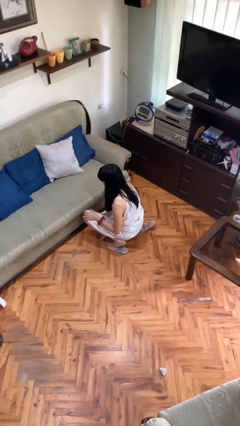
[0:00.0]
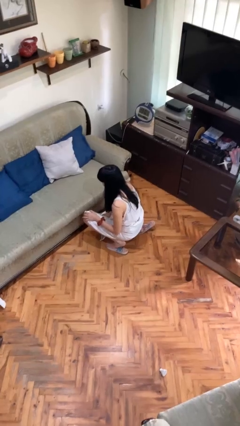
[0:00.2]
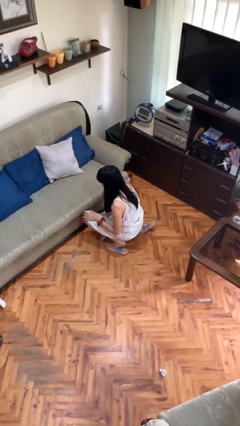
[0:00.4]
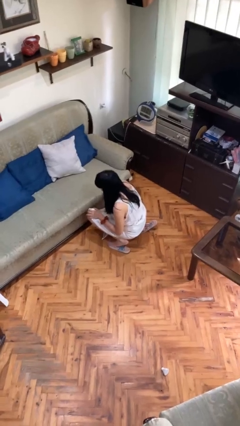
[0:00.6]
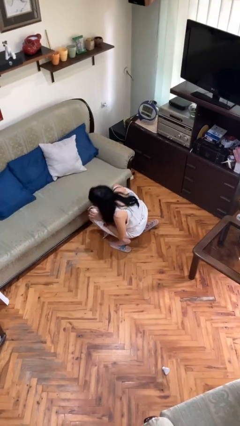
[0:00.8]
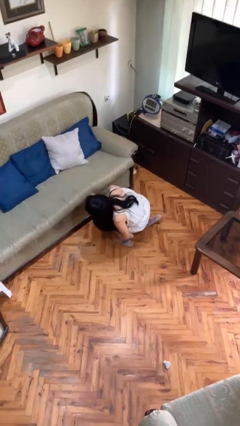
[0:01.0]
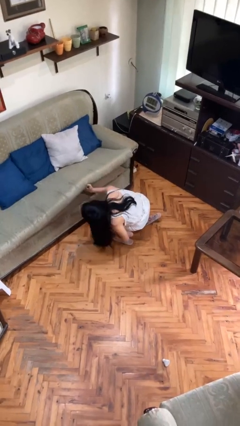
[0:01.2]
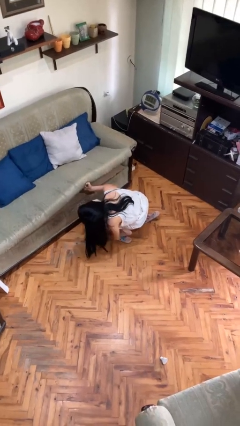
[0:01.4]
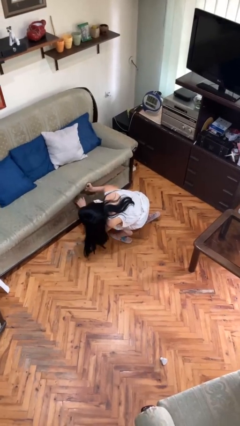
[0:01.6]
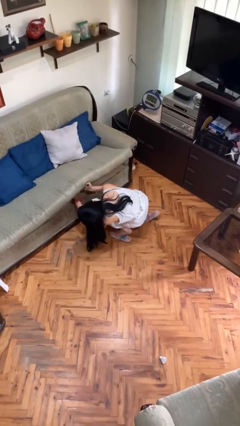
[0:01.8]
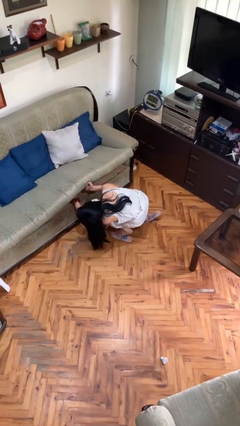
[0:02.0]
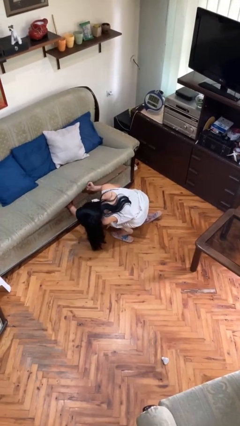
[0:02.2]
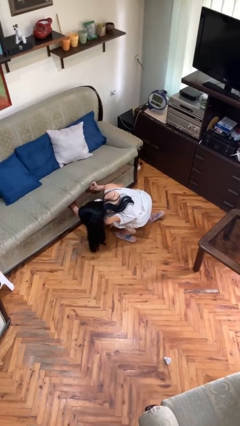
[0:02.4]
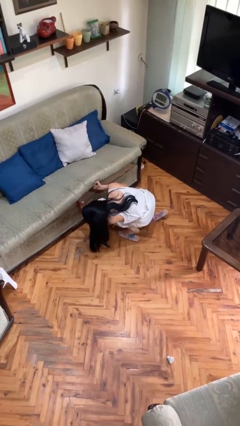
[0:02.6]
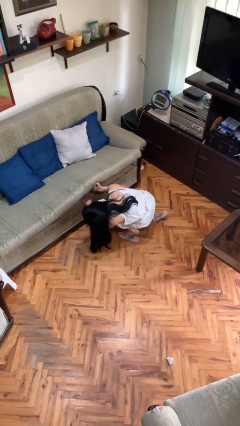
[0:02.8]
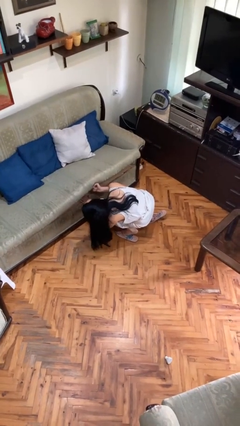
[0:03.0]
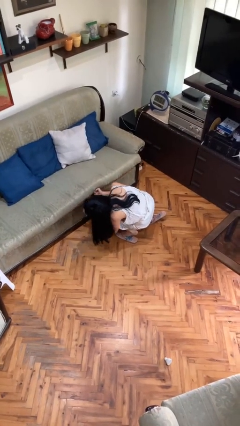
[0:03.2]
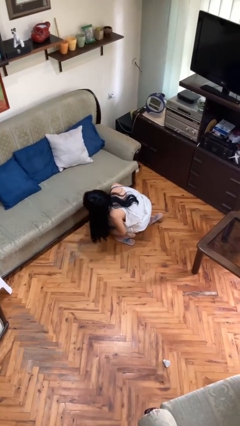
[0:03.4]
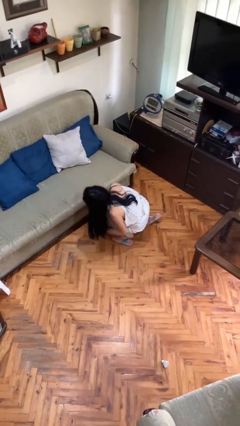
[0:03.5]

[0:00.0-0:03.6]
person searches under couch

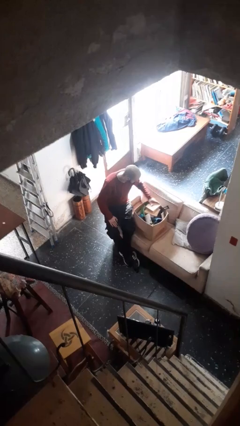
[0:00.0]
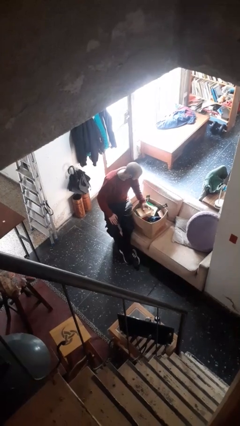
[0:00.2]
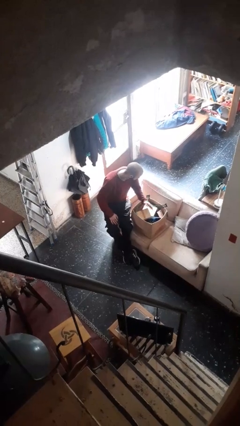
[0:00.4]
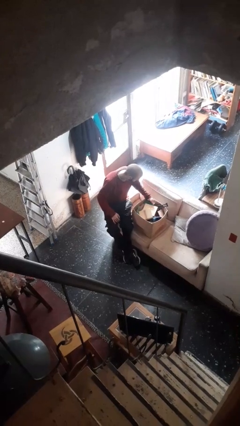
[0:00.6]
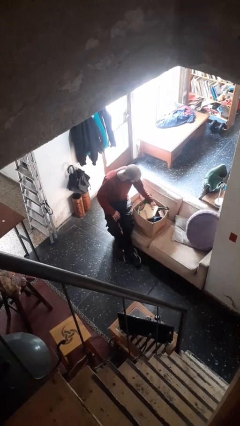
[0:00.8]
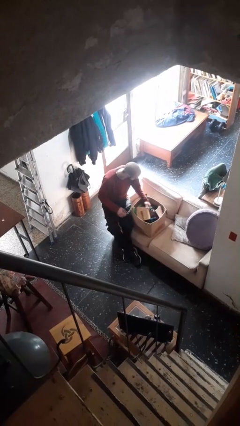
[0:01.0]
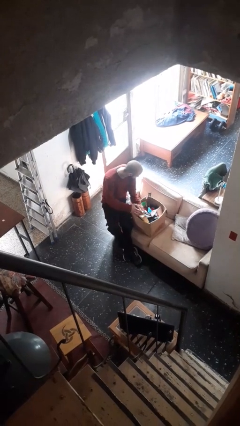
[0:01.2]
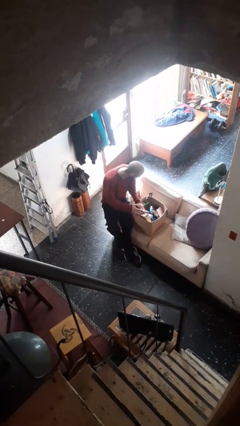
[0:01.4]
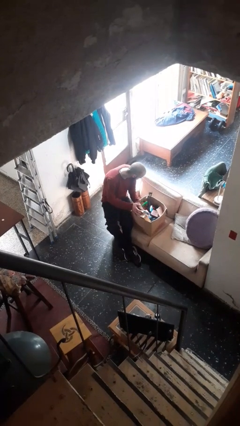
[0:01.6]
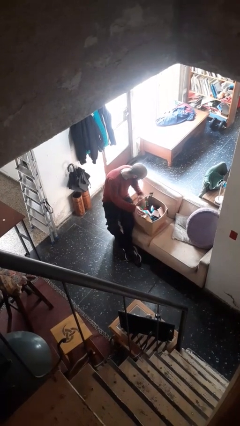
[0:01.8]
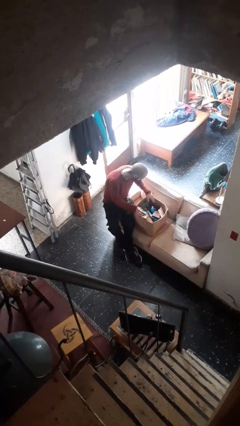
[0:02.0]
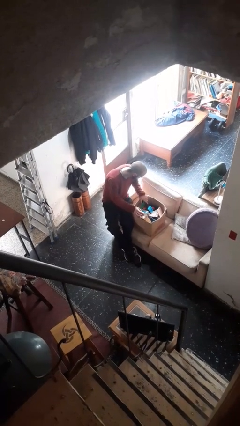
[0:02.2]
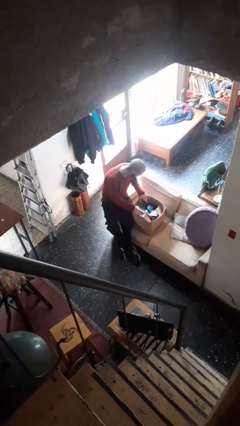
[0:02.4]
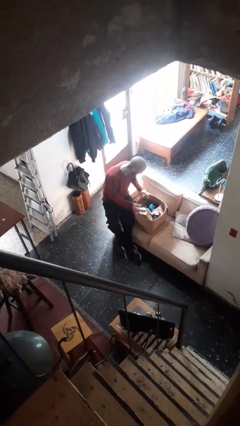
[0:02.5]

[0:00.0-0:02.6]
person searches in box

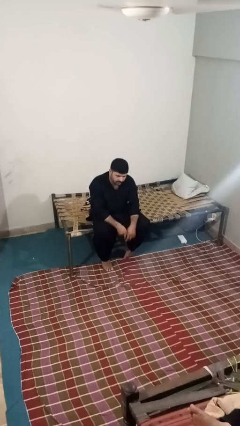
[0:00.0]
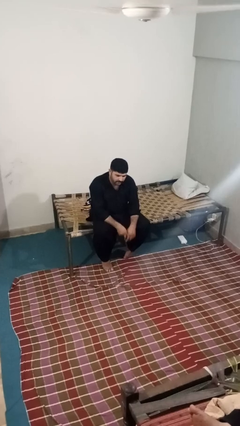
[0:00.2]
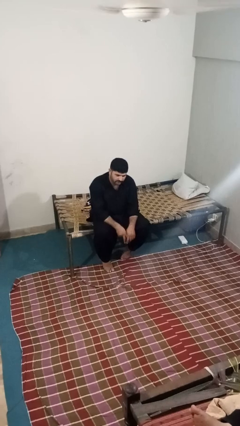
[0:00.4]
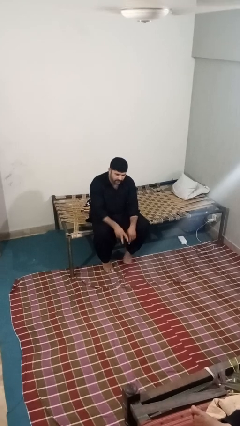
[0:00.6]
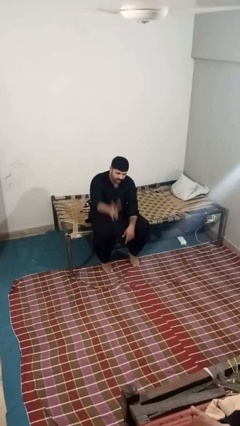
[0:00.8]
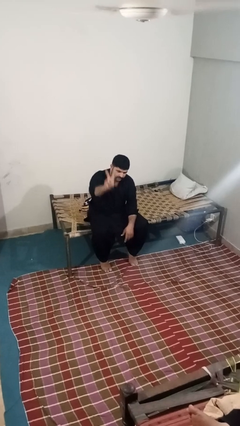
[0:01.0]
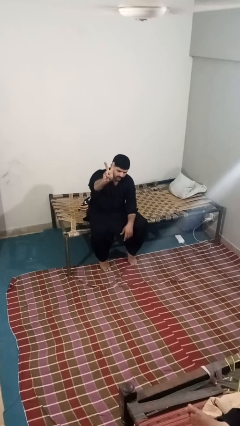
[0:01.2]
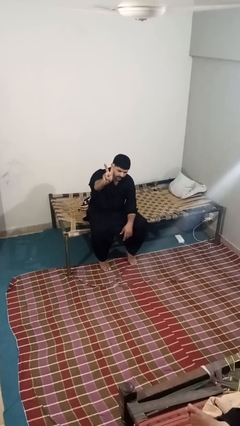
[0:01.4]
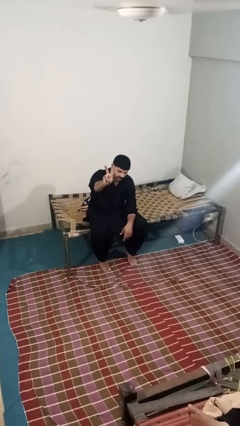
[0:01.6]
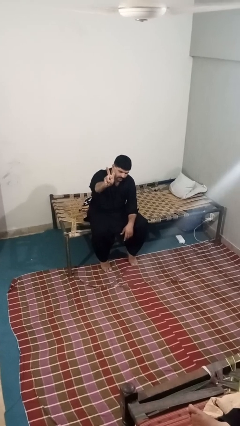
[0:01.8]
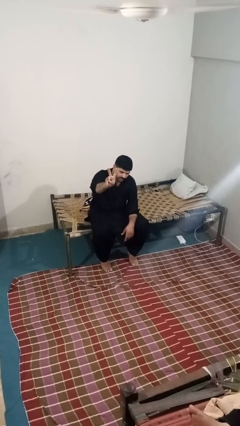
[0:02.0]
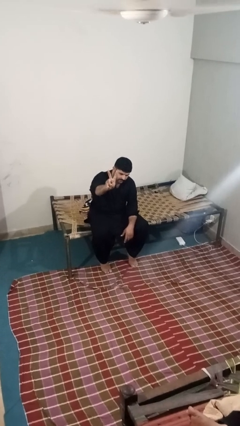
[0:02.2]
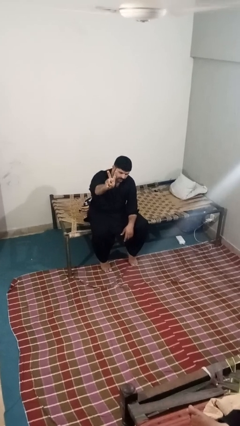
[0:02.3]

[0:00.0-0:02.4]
person gestures peace

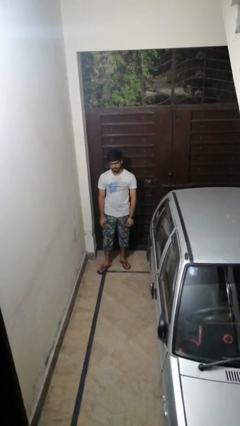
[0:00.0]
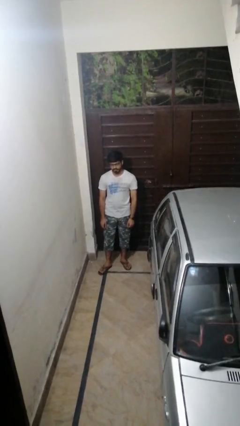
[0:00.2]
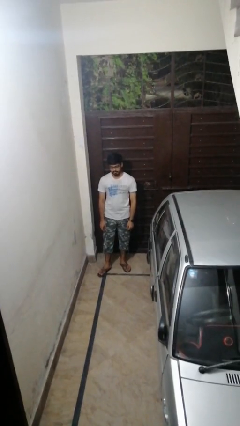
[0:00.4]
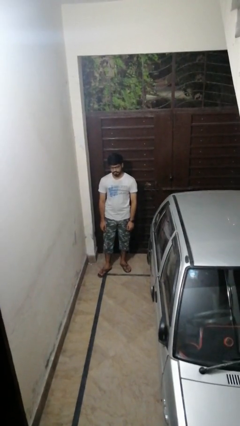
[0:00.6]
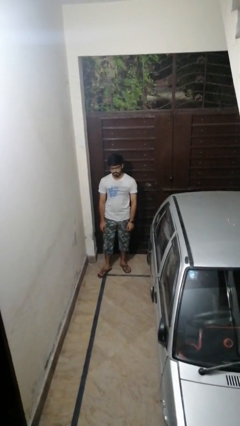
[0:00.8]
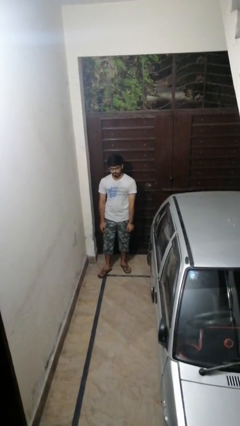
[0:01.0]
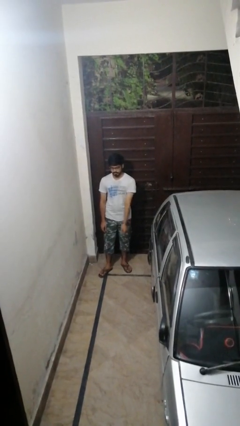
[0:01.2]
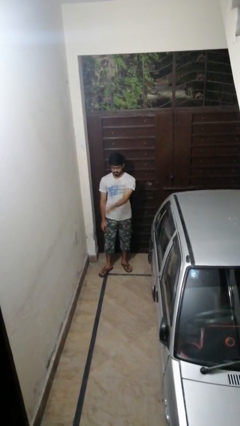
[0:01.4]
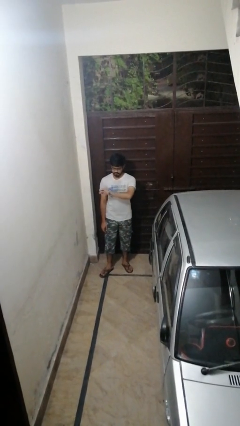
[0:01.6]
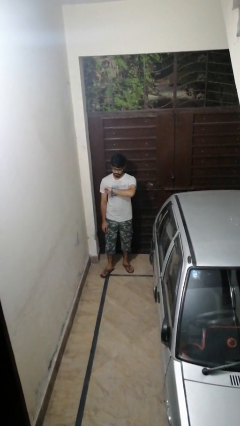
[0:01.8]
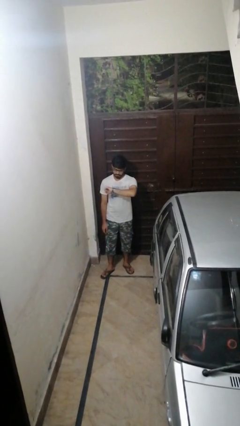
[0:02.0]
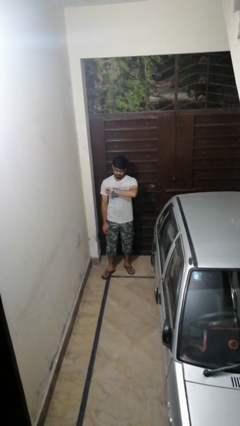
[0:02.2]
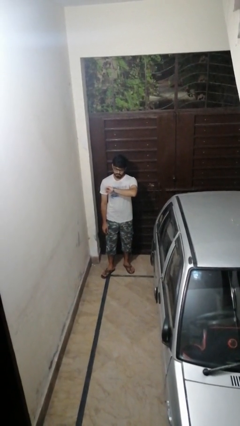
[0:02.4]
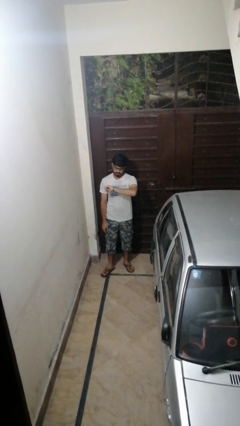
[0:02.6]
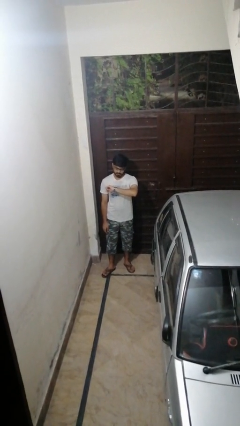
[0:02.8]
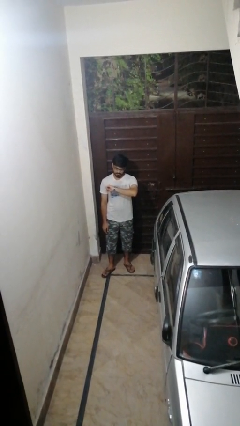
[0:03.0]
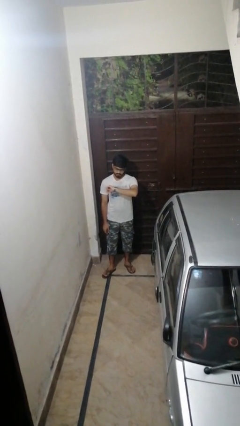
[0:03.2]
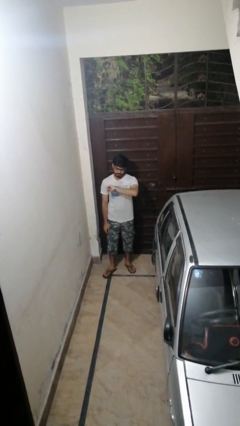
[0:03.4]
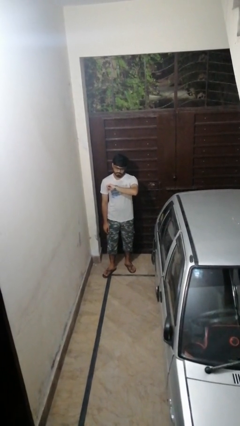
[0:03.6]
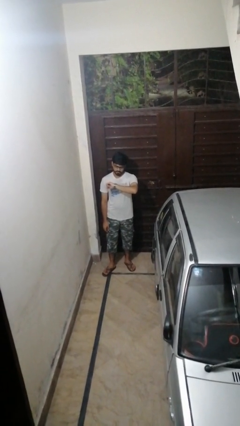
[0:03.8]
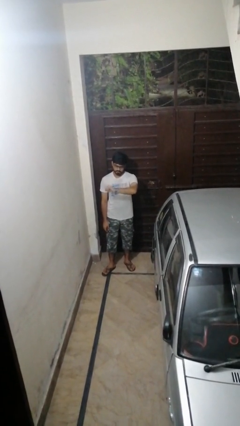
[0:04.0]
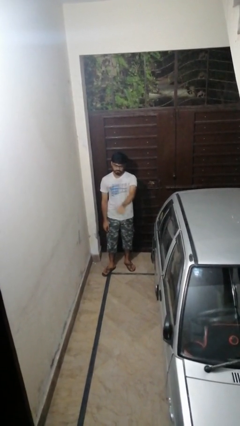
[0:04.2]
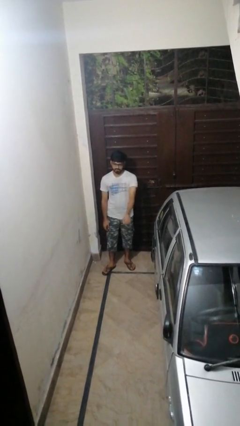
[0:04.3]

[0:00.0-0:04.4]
person looks at wristwatch

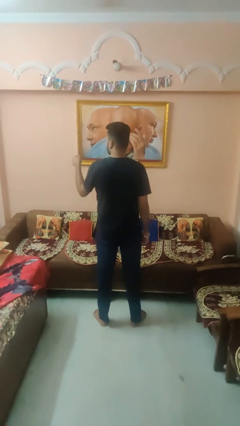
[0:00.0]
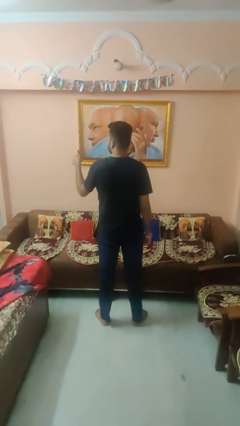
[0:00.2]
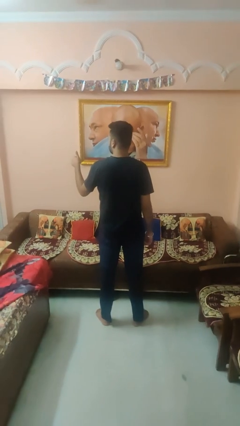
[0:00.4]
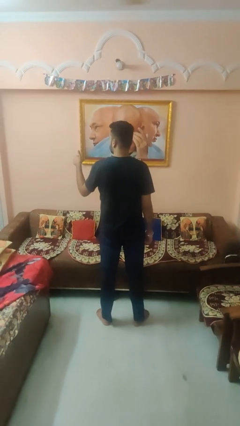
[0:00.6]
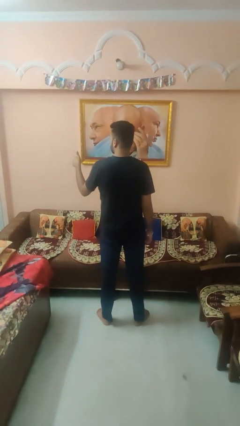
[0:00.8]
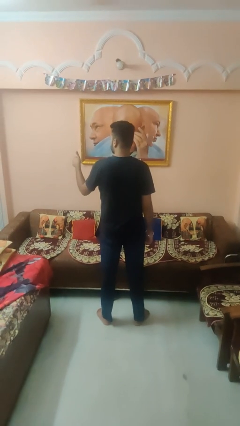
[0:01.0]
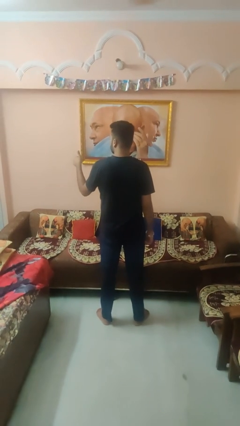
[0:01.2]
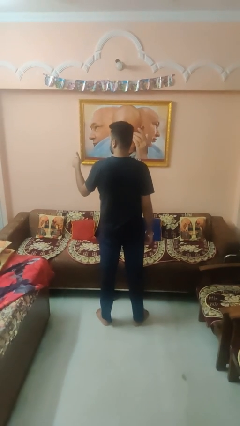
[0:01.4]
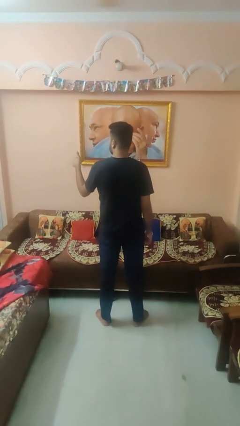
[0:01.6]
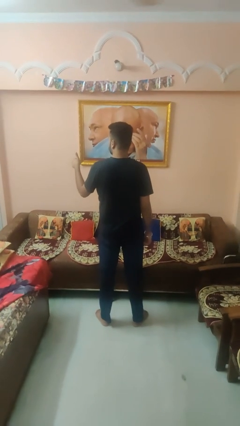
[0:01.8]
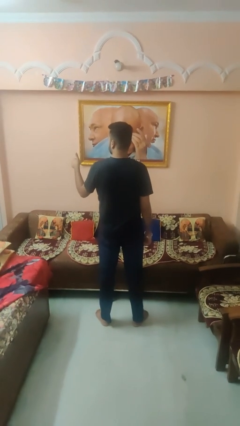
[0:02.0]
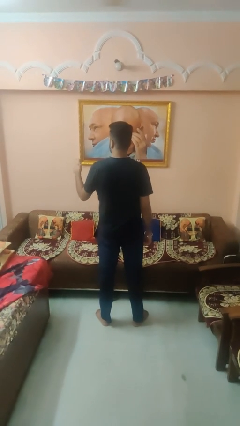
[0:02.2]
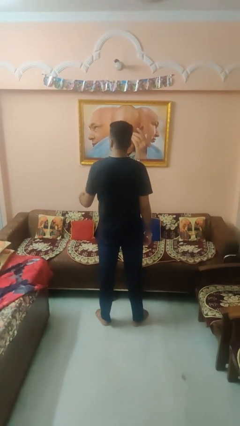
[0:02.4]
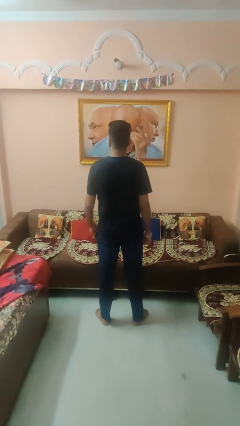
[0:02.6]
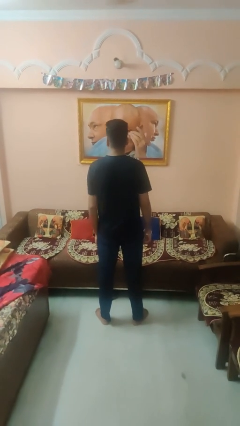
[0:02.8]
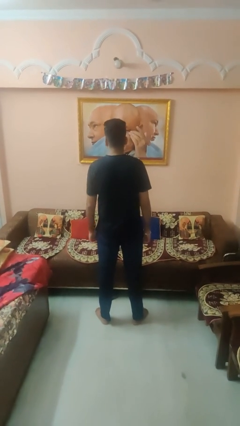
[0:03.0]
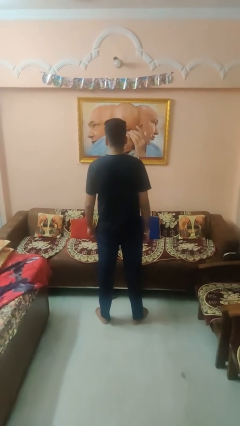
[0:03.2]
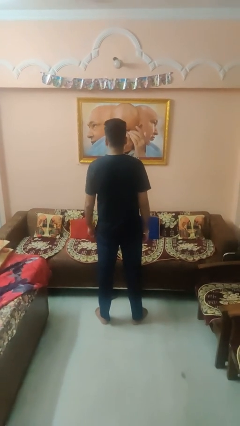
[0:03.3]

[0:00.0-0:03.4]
person gestures thumbs up

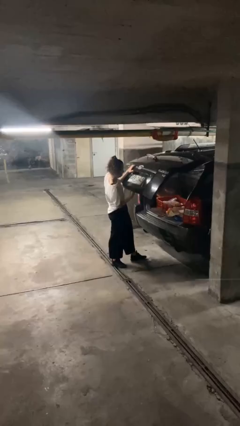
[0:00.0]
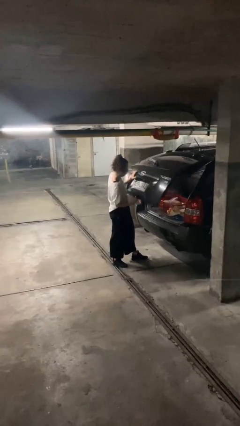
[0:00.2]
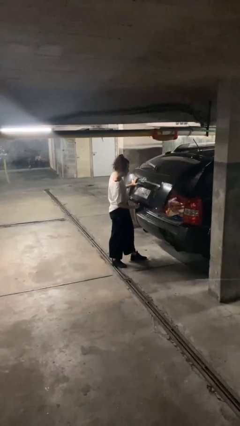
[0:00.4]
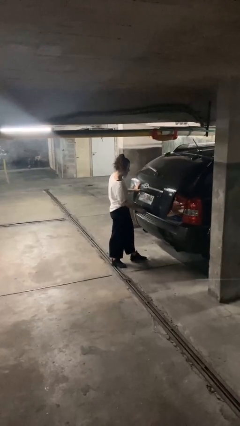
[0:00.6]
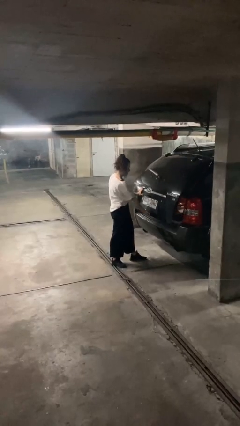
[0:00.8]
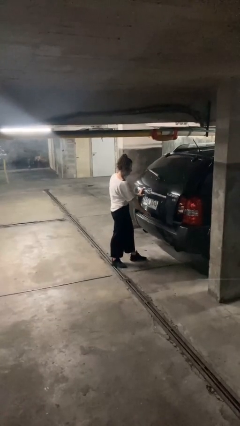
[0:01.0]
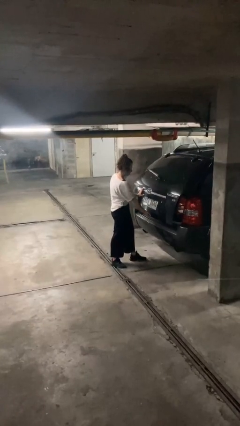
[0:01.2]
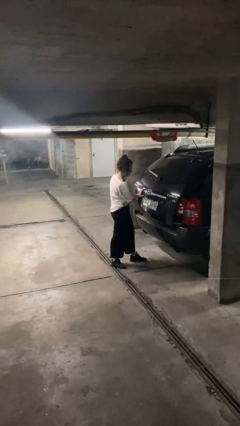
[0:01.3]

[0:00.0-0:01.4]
person closes car trunk
